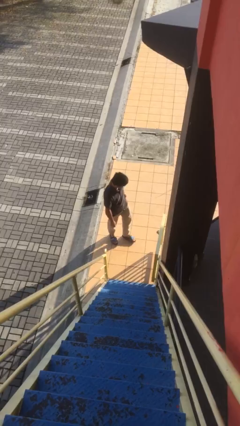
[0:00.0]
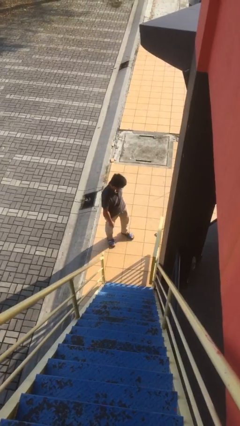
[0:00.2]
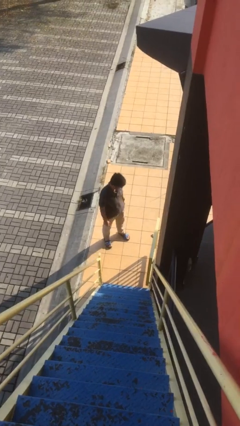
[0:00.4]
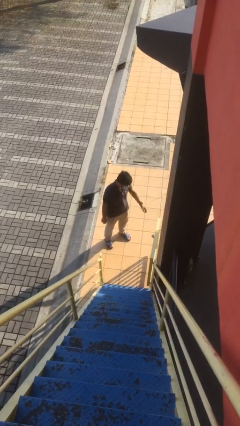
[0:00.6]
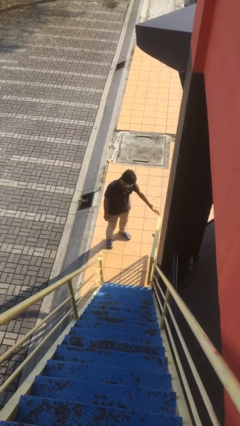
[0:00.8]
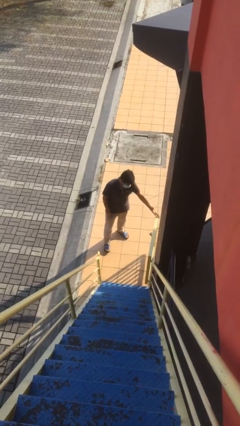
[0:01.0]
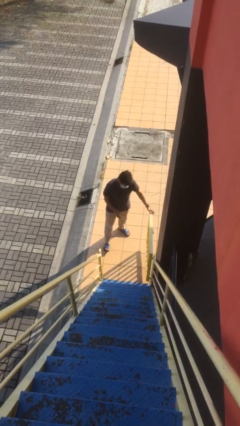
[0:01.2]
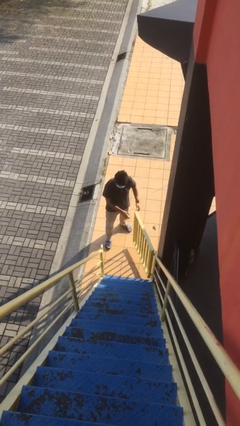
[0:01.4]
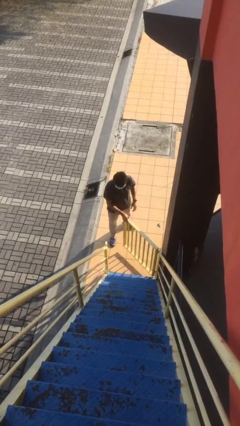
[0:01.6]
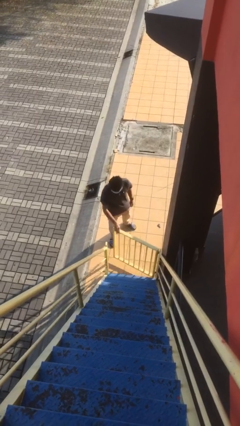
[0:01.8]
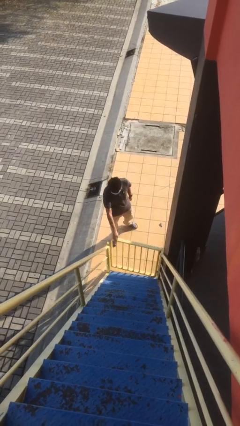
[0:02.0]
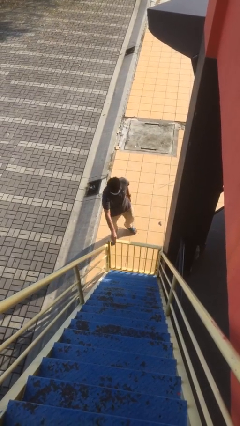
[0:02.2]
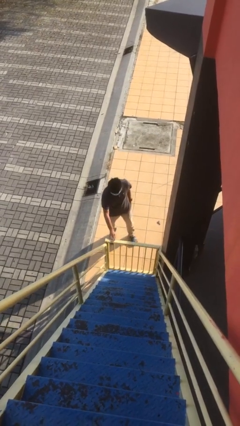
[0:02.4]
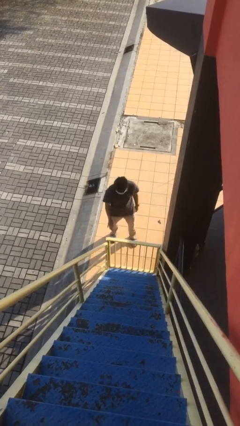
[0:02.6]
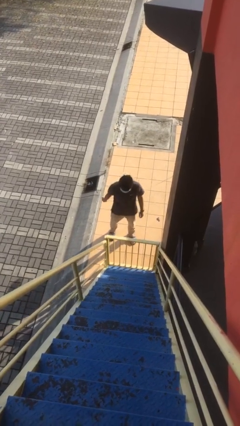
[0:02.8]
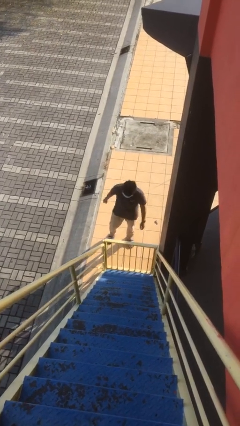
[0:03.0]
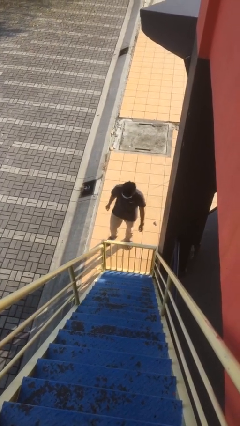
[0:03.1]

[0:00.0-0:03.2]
person closes facility door

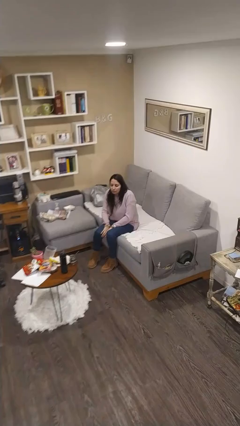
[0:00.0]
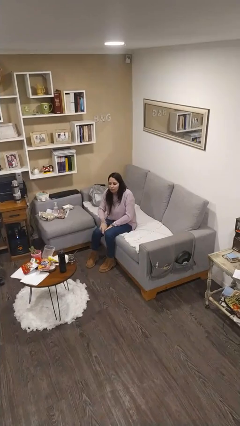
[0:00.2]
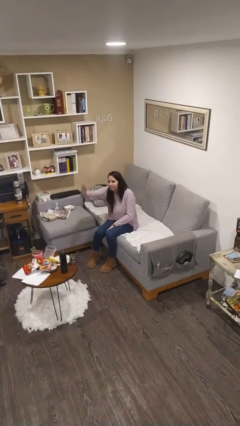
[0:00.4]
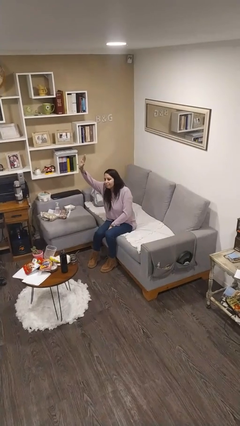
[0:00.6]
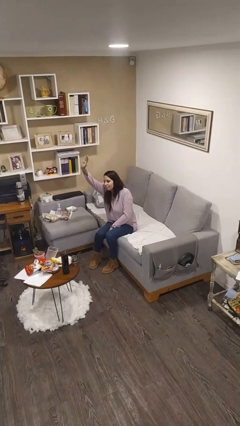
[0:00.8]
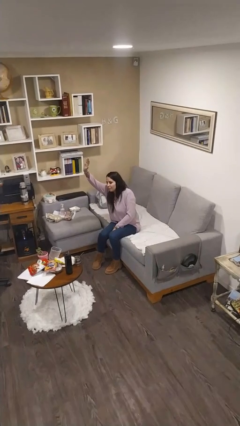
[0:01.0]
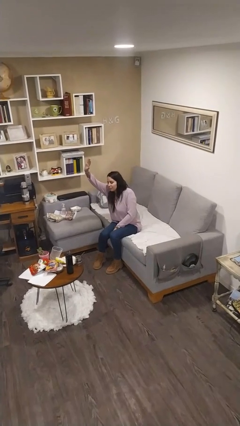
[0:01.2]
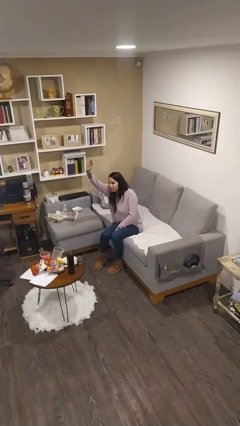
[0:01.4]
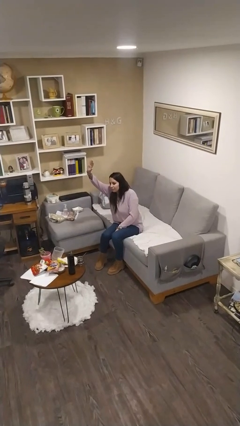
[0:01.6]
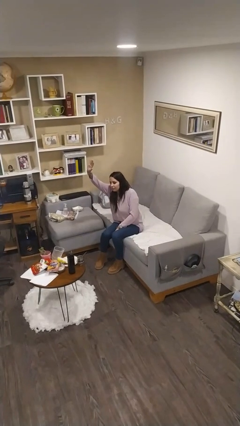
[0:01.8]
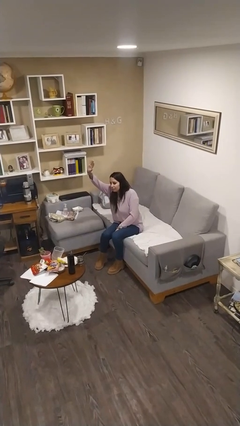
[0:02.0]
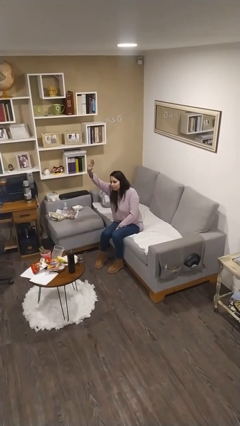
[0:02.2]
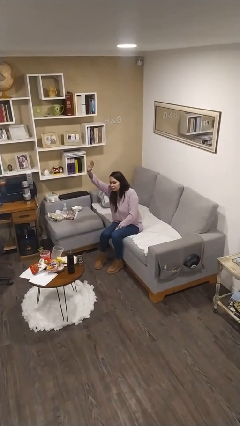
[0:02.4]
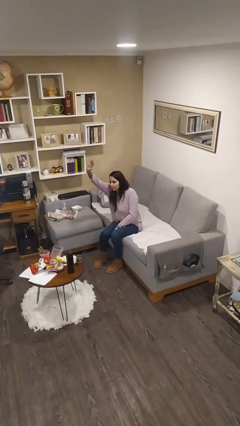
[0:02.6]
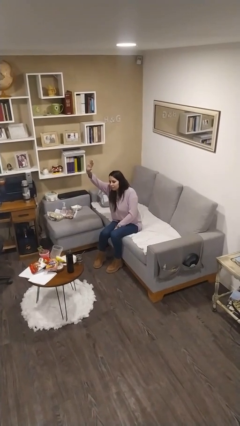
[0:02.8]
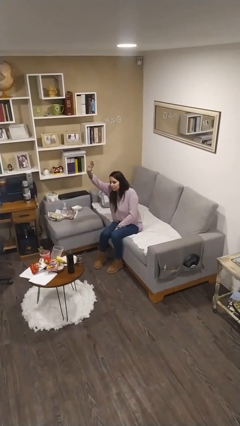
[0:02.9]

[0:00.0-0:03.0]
person gestures raise hand

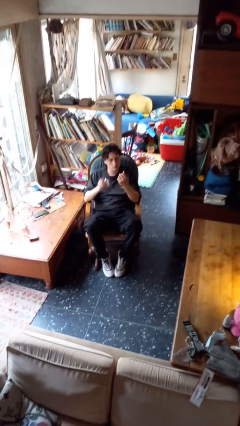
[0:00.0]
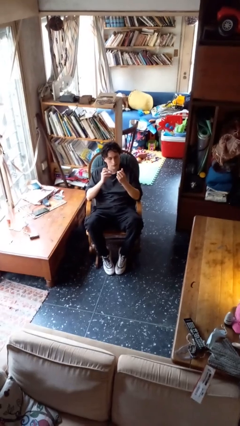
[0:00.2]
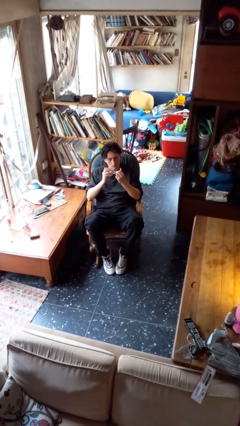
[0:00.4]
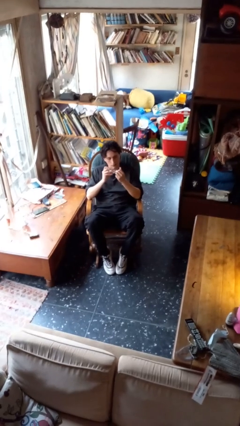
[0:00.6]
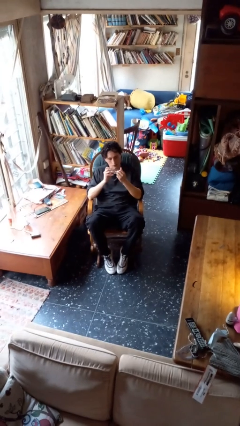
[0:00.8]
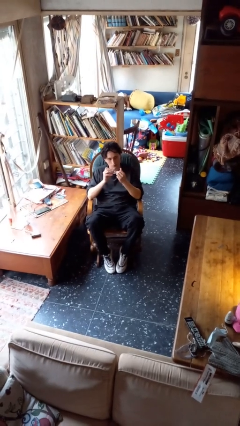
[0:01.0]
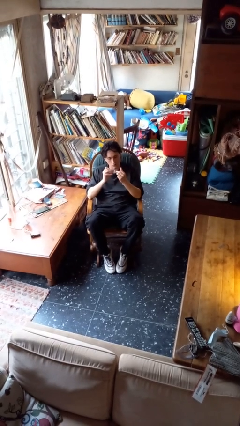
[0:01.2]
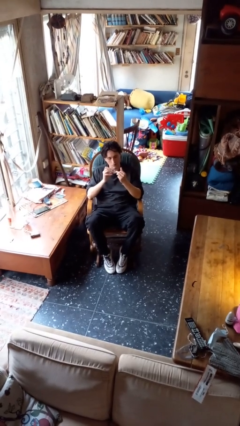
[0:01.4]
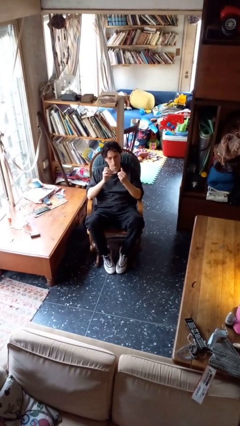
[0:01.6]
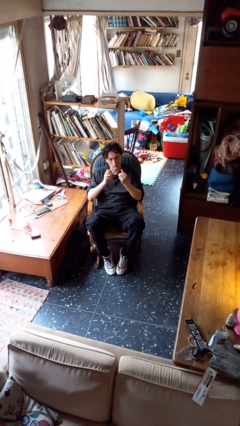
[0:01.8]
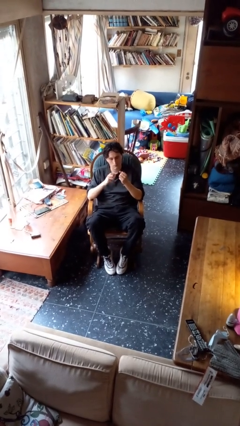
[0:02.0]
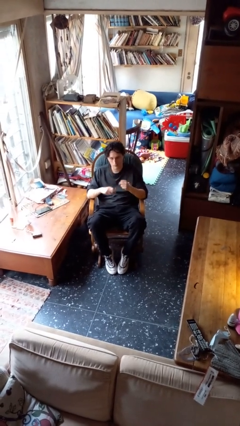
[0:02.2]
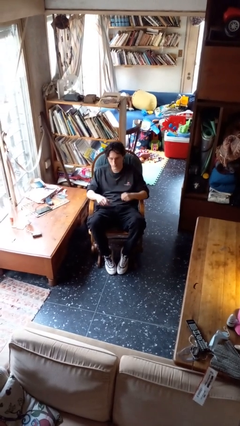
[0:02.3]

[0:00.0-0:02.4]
person clips fingernails

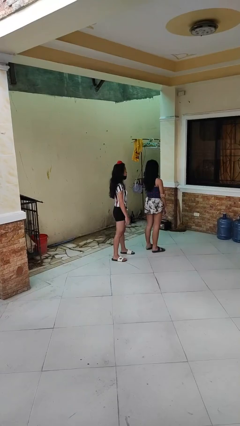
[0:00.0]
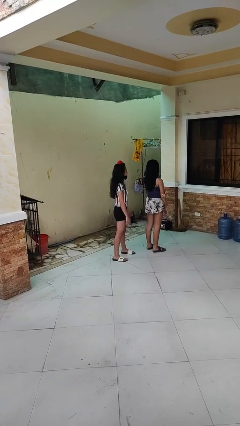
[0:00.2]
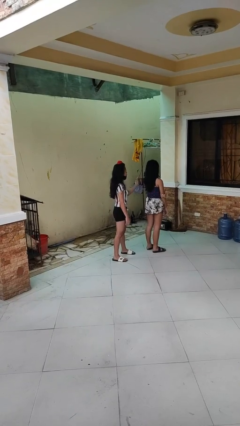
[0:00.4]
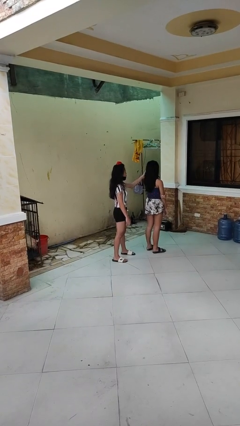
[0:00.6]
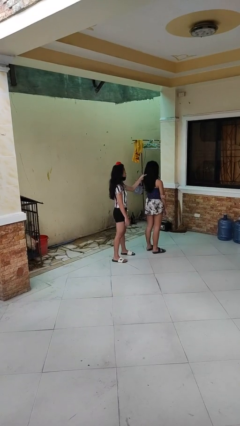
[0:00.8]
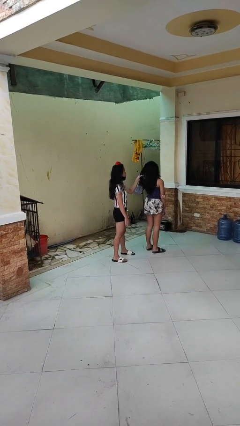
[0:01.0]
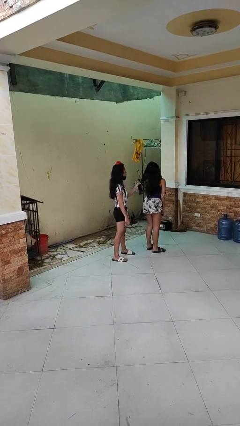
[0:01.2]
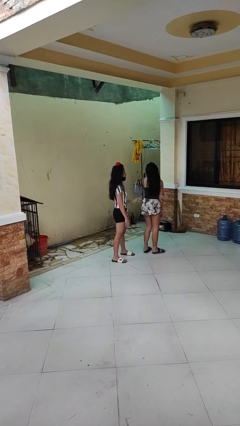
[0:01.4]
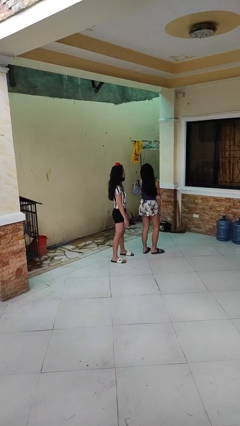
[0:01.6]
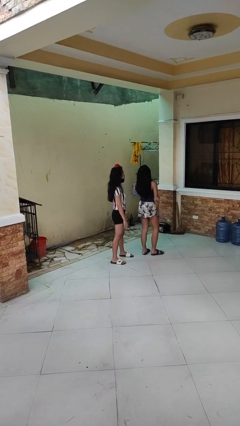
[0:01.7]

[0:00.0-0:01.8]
person grabs person by hair

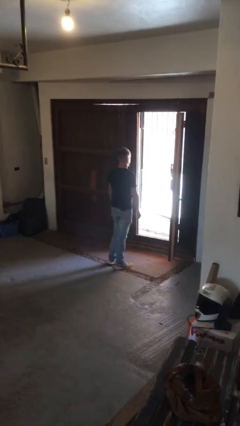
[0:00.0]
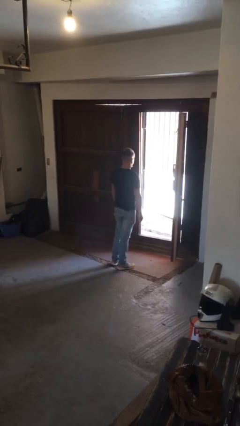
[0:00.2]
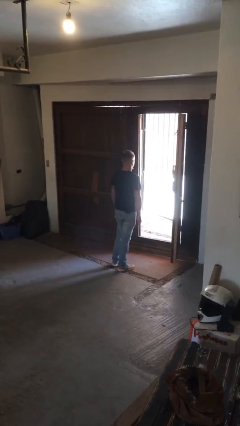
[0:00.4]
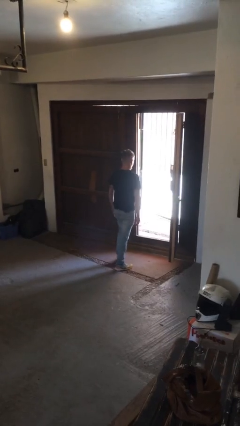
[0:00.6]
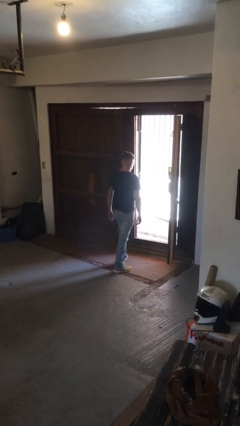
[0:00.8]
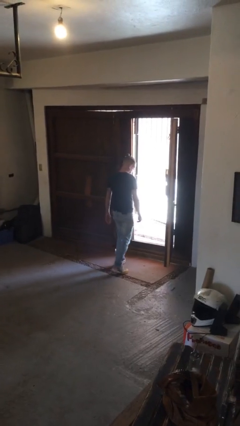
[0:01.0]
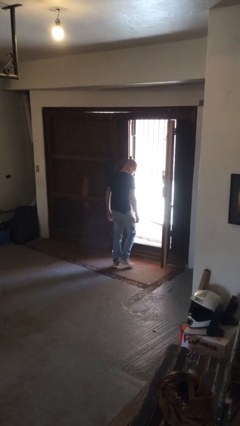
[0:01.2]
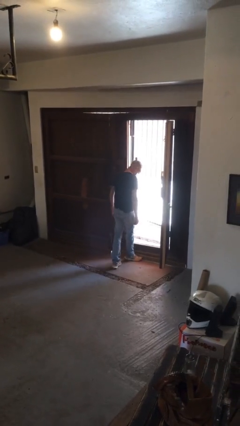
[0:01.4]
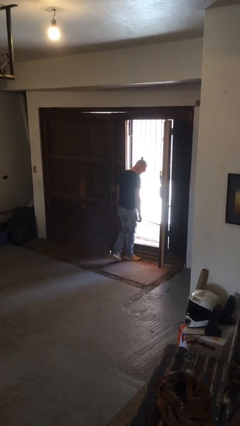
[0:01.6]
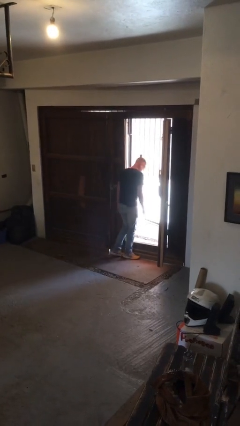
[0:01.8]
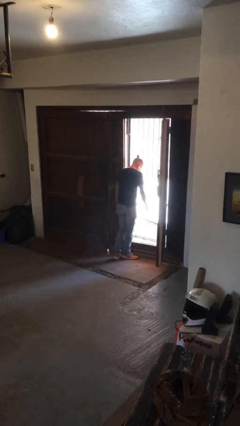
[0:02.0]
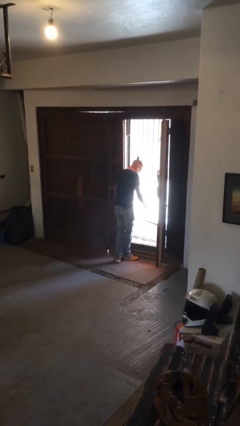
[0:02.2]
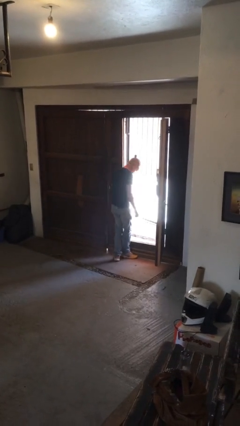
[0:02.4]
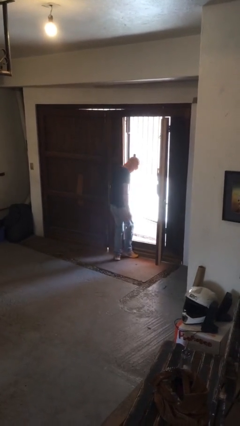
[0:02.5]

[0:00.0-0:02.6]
person bumps into wall

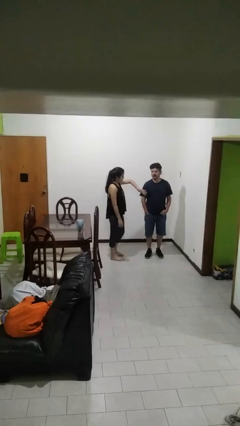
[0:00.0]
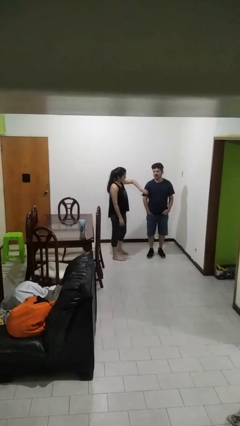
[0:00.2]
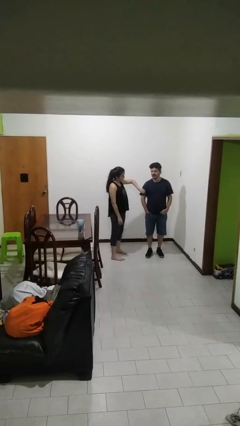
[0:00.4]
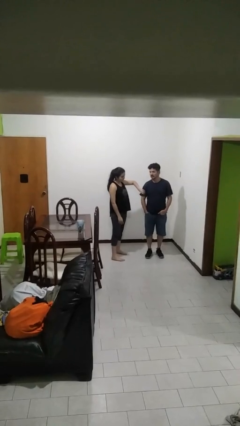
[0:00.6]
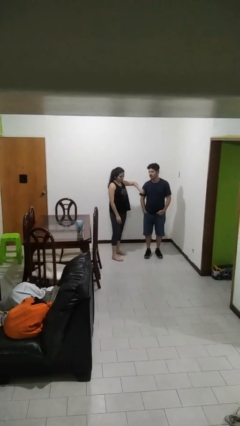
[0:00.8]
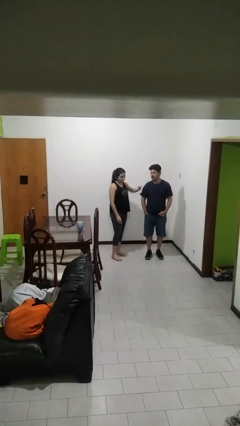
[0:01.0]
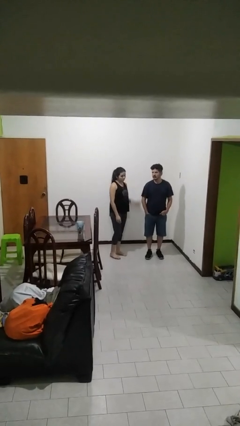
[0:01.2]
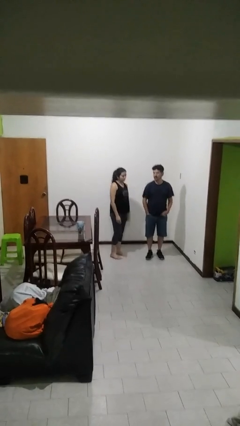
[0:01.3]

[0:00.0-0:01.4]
person grabs person by bicep

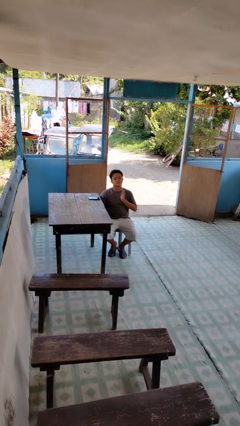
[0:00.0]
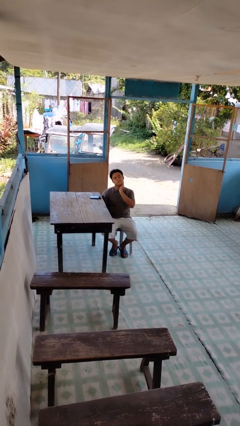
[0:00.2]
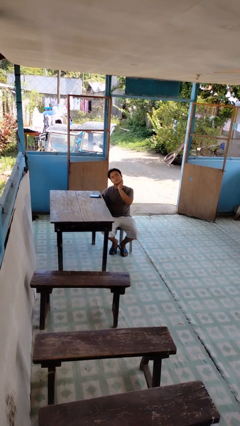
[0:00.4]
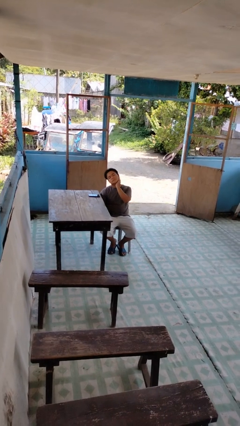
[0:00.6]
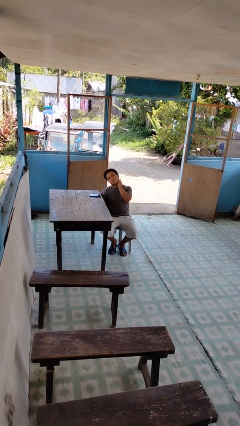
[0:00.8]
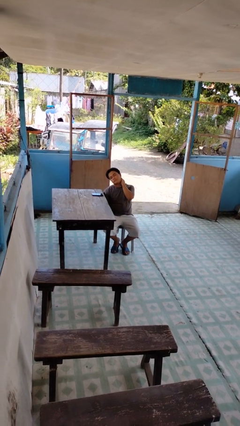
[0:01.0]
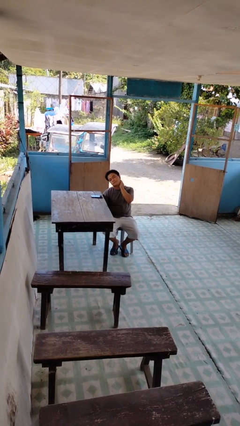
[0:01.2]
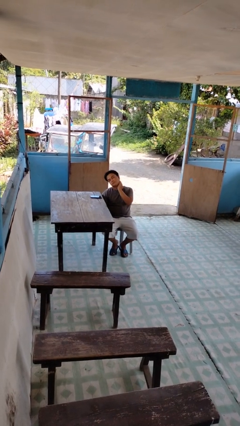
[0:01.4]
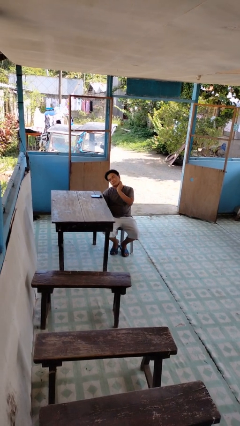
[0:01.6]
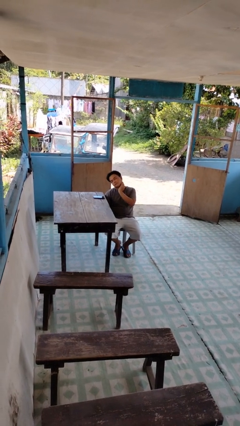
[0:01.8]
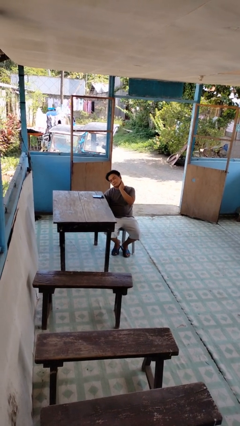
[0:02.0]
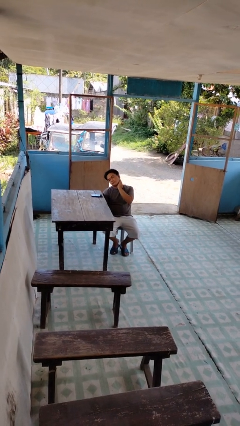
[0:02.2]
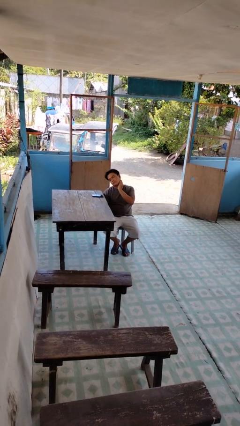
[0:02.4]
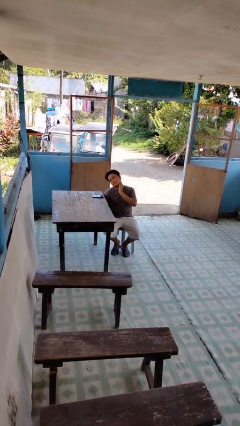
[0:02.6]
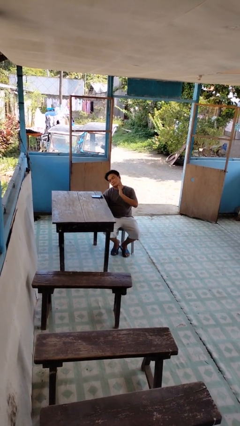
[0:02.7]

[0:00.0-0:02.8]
person rubs neck
